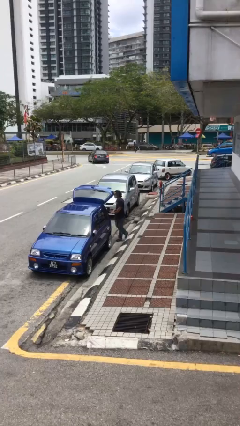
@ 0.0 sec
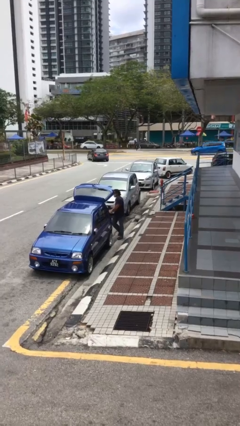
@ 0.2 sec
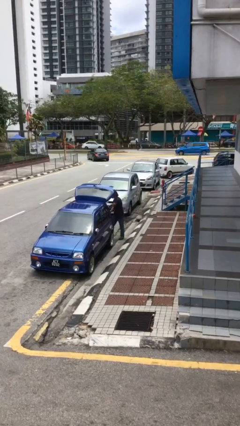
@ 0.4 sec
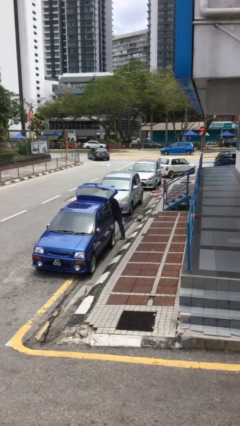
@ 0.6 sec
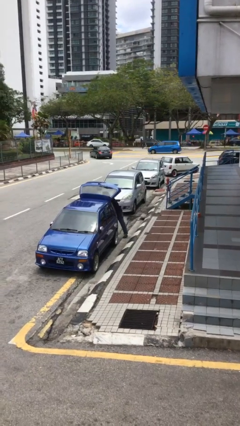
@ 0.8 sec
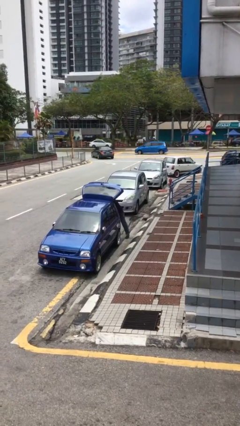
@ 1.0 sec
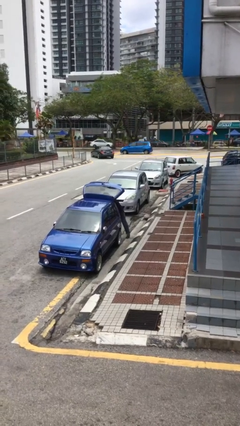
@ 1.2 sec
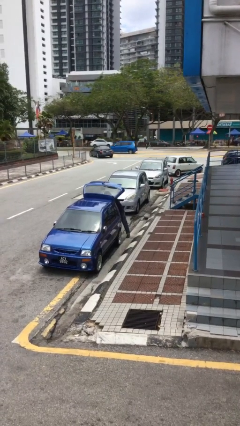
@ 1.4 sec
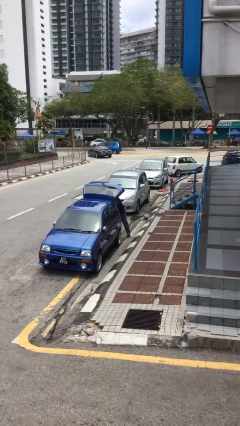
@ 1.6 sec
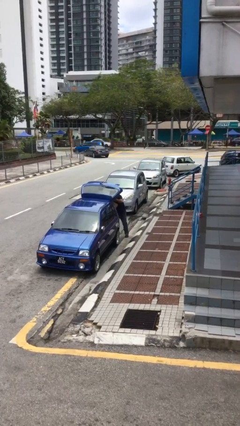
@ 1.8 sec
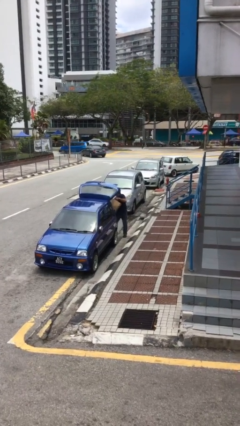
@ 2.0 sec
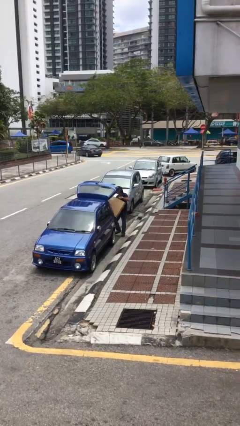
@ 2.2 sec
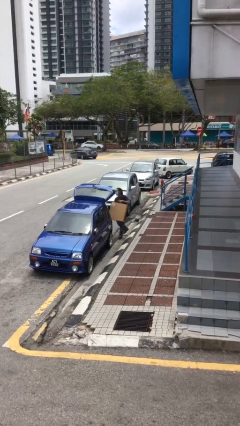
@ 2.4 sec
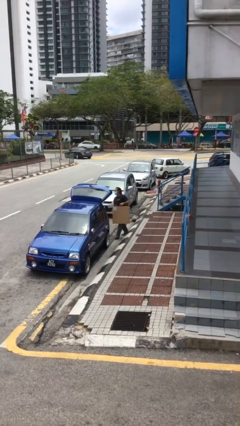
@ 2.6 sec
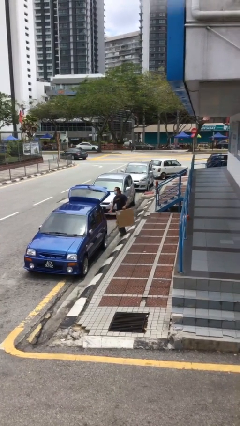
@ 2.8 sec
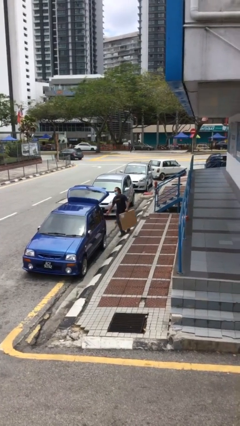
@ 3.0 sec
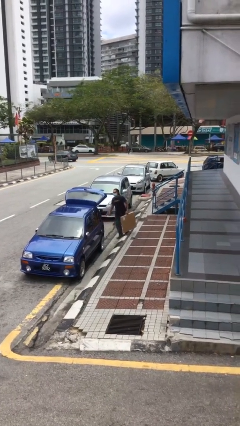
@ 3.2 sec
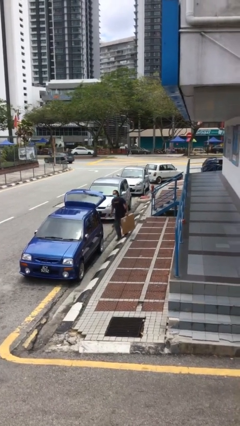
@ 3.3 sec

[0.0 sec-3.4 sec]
person unloads car

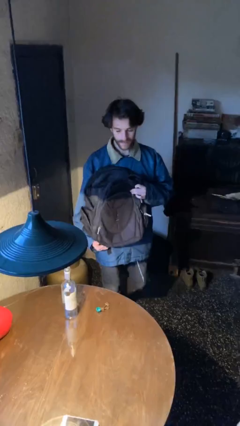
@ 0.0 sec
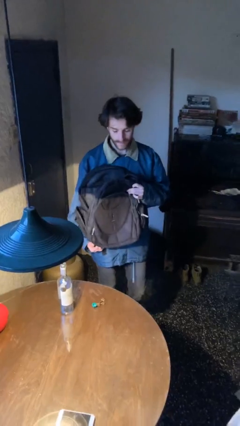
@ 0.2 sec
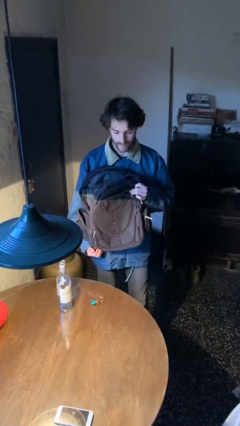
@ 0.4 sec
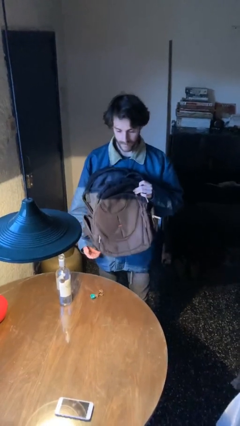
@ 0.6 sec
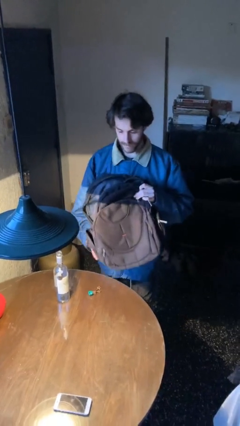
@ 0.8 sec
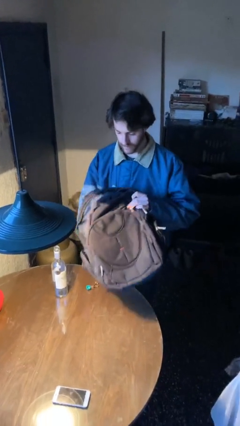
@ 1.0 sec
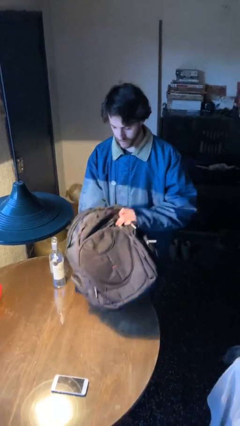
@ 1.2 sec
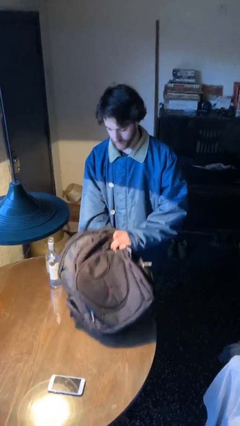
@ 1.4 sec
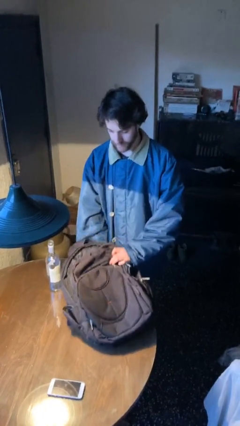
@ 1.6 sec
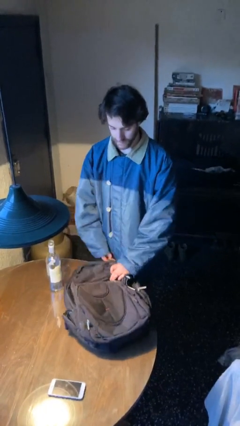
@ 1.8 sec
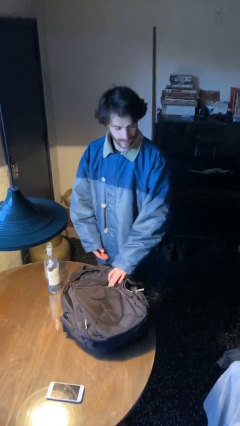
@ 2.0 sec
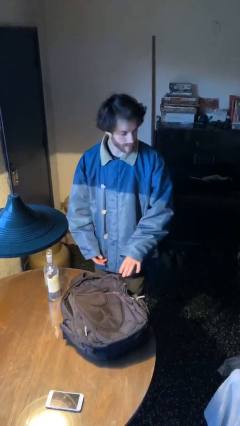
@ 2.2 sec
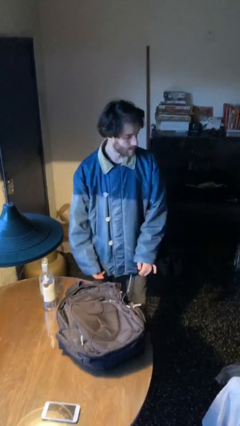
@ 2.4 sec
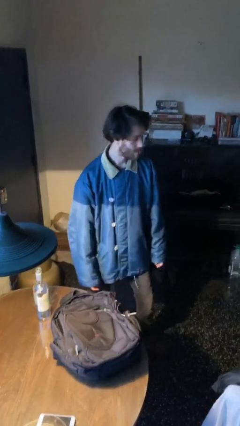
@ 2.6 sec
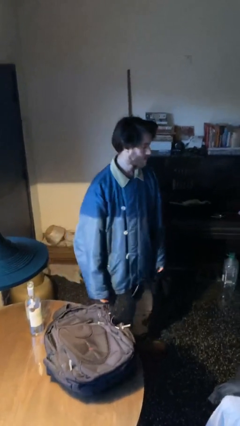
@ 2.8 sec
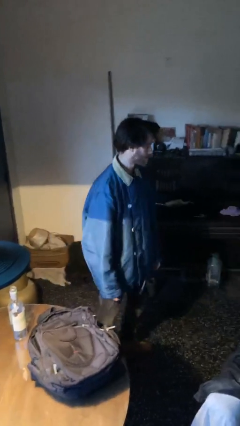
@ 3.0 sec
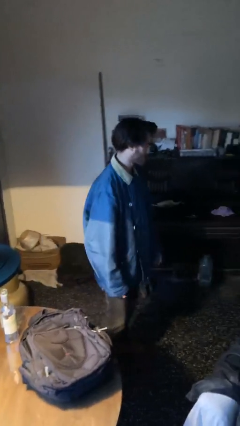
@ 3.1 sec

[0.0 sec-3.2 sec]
person puts down object on table

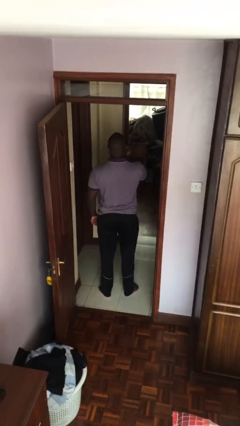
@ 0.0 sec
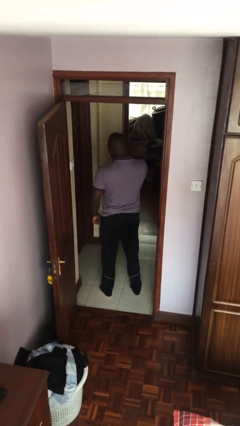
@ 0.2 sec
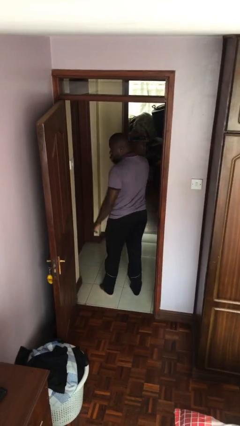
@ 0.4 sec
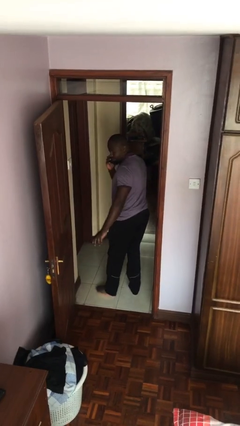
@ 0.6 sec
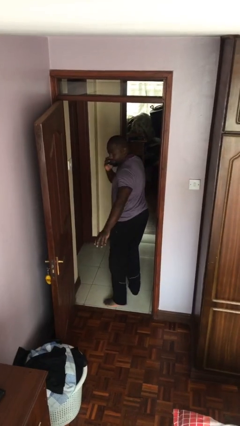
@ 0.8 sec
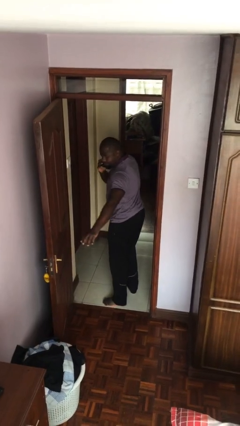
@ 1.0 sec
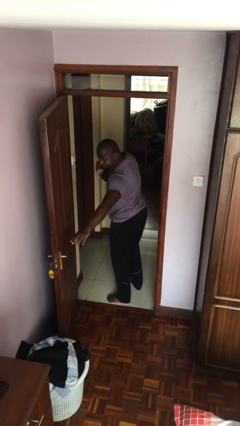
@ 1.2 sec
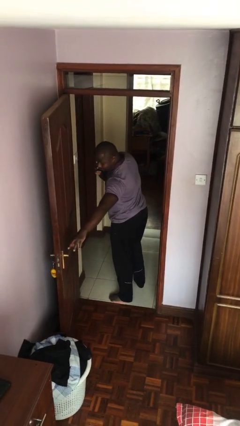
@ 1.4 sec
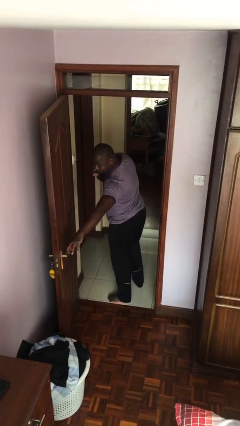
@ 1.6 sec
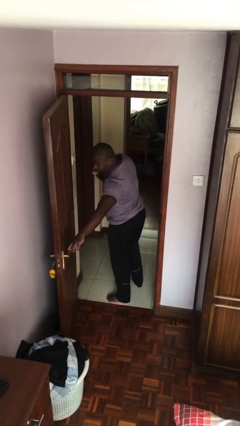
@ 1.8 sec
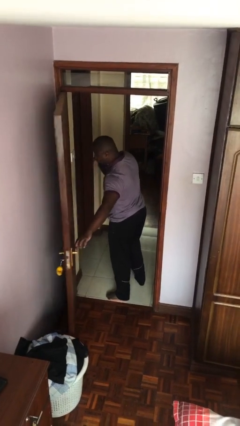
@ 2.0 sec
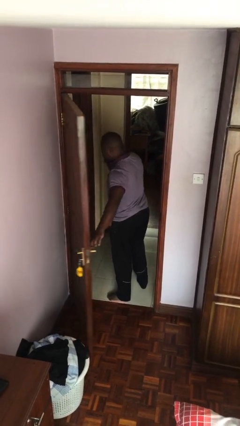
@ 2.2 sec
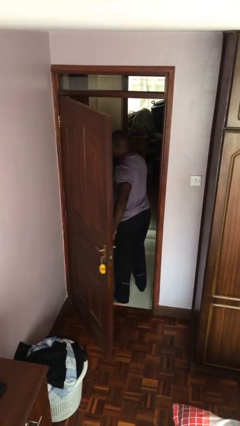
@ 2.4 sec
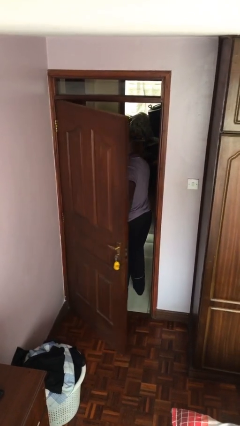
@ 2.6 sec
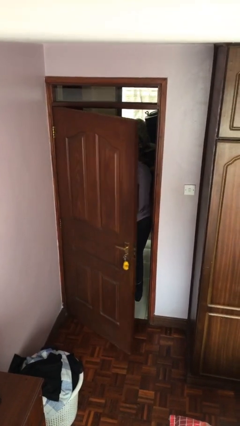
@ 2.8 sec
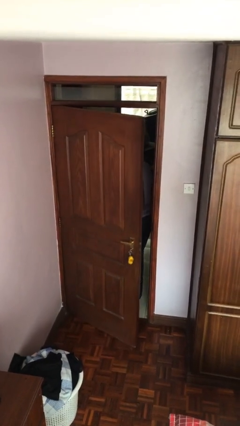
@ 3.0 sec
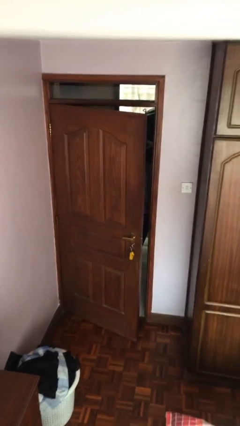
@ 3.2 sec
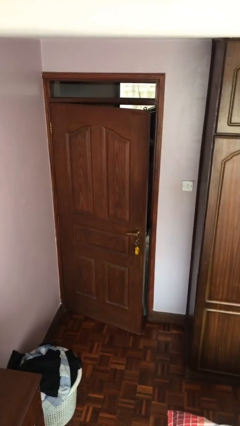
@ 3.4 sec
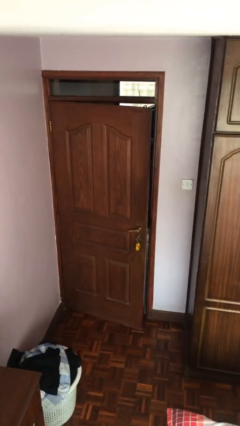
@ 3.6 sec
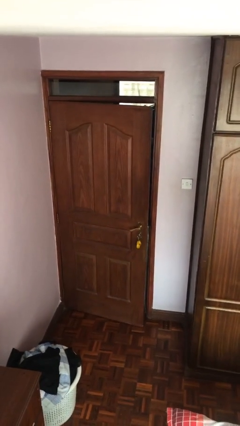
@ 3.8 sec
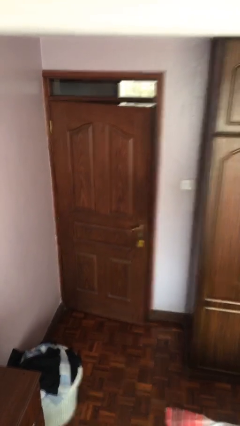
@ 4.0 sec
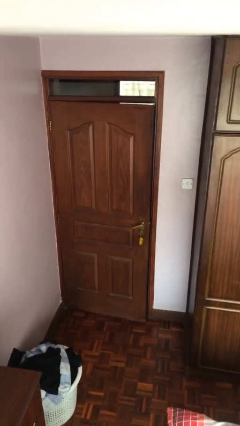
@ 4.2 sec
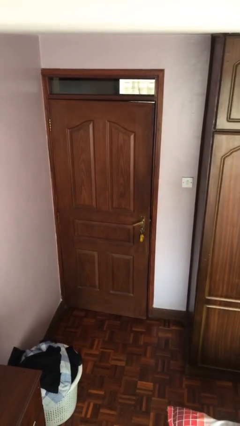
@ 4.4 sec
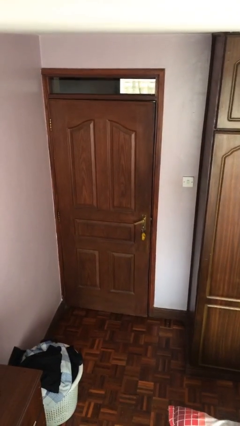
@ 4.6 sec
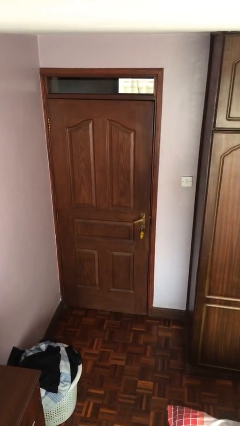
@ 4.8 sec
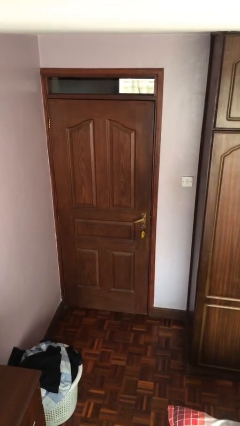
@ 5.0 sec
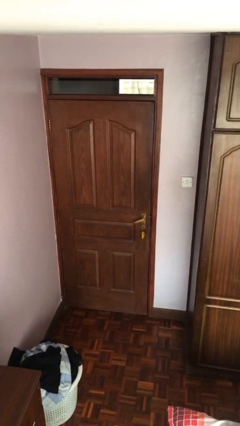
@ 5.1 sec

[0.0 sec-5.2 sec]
person closes facility door

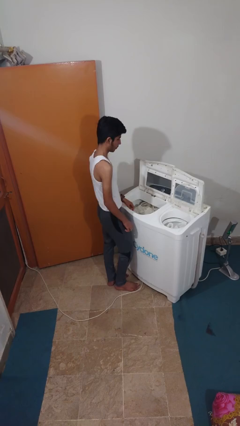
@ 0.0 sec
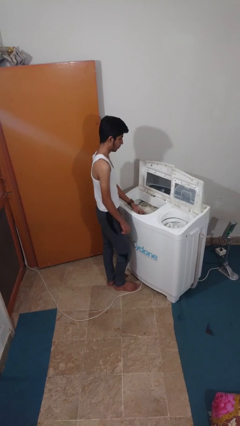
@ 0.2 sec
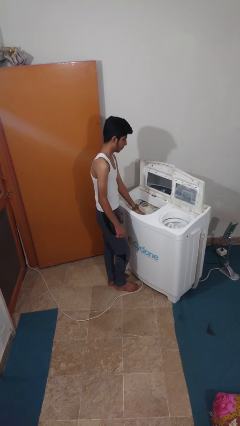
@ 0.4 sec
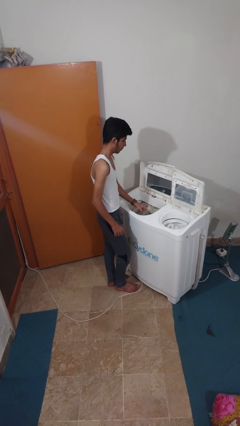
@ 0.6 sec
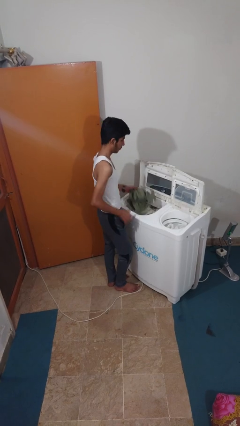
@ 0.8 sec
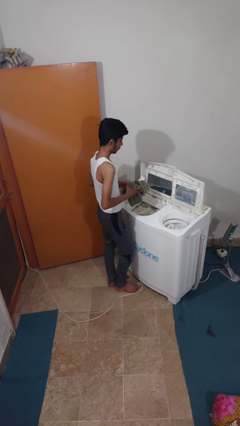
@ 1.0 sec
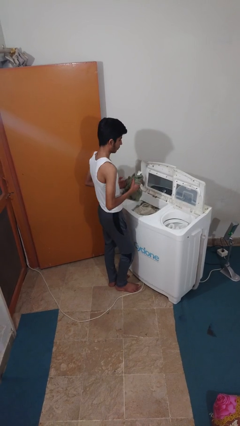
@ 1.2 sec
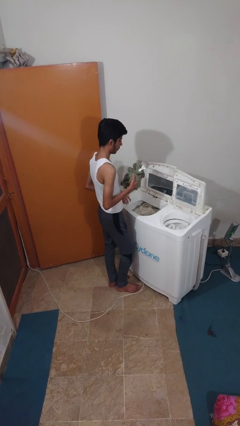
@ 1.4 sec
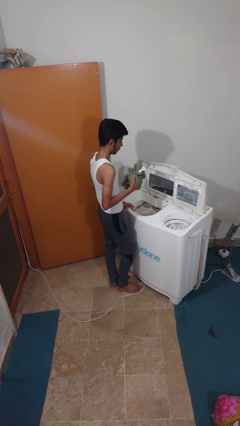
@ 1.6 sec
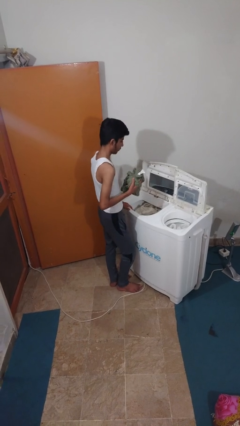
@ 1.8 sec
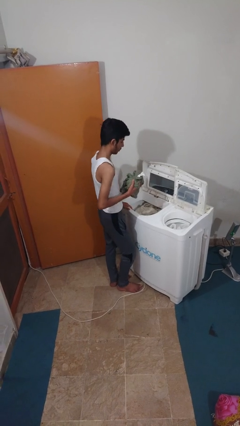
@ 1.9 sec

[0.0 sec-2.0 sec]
person unloads clotheswasher

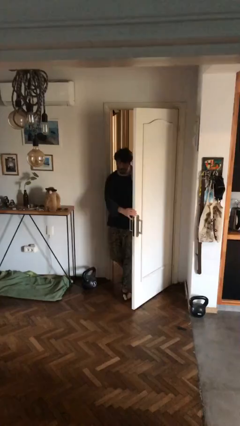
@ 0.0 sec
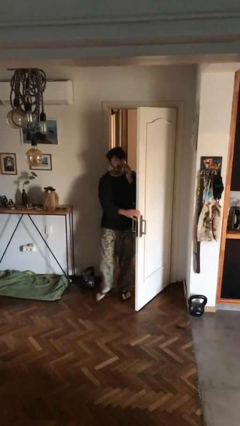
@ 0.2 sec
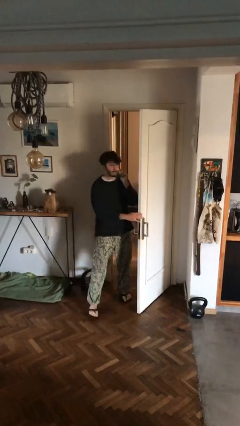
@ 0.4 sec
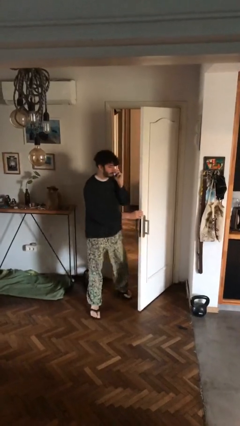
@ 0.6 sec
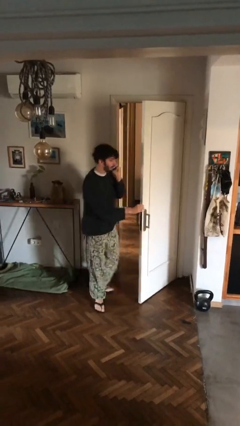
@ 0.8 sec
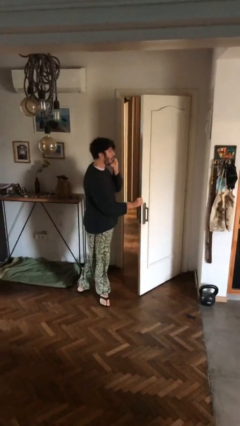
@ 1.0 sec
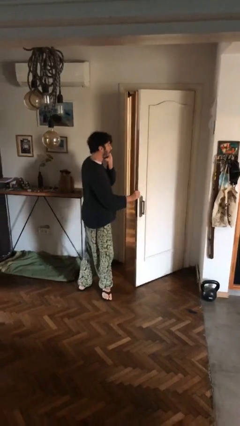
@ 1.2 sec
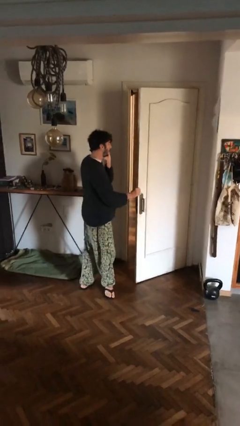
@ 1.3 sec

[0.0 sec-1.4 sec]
person enters scene through structure

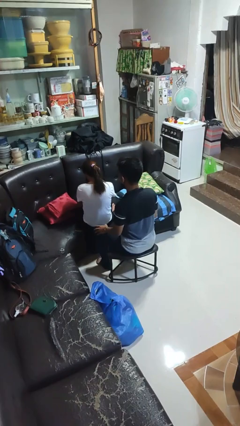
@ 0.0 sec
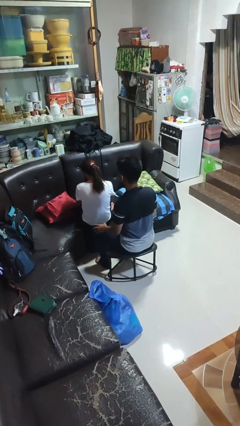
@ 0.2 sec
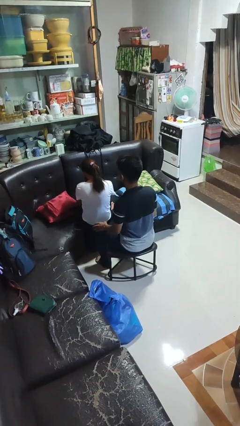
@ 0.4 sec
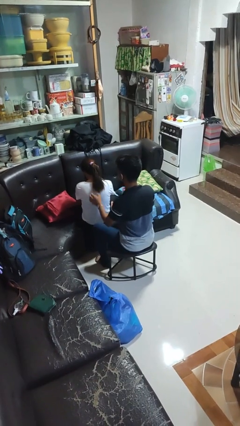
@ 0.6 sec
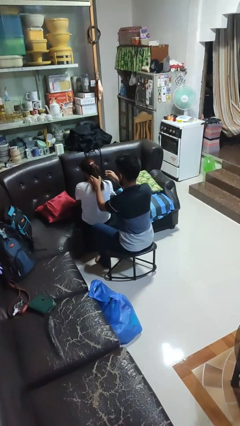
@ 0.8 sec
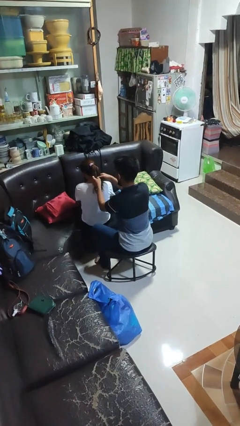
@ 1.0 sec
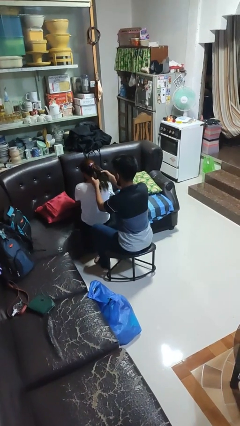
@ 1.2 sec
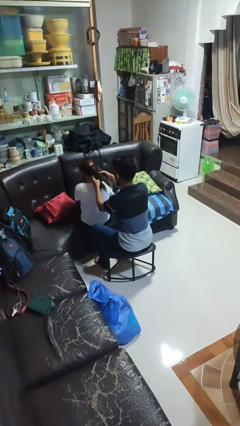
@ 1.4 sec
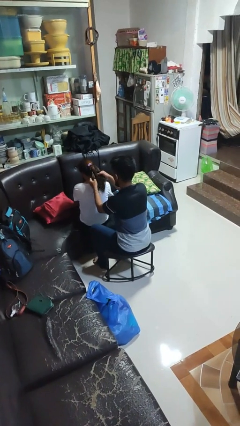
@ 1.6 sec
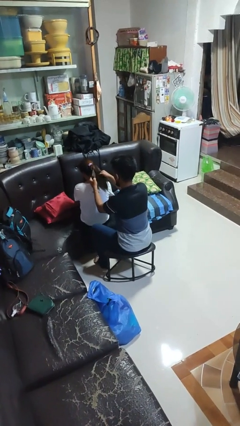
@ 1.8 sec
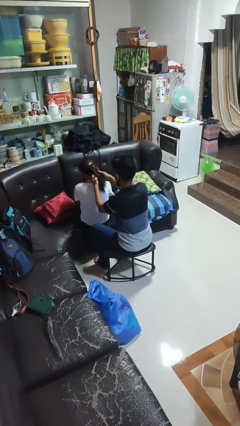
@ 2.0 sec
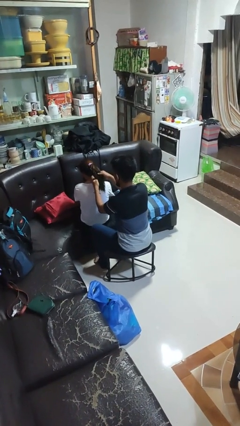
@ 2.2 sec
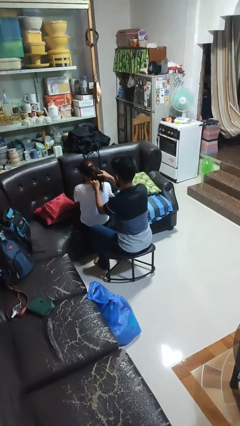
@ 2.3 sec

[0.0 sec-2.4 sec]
person braids hair of person
